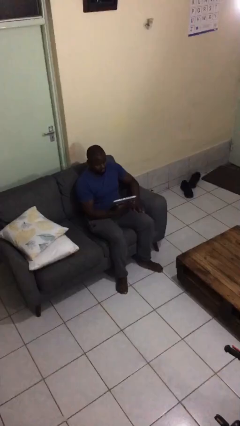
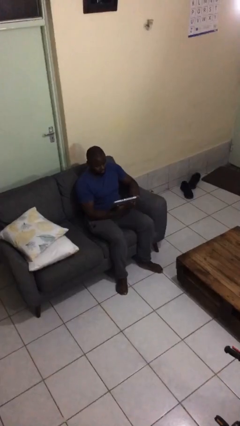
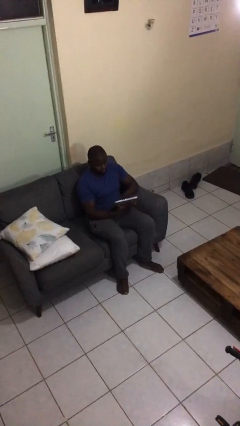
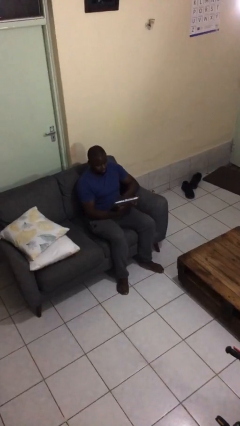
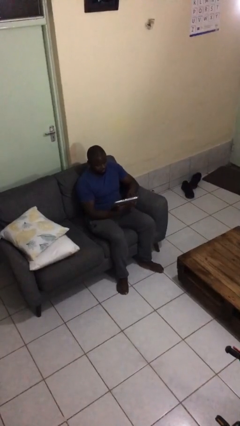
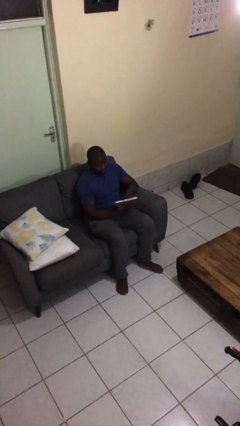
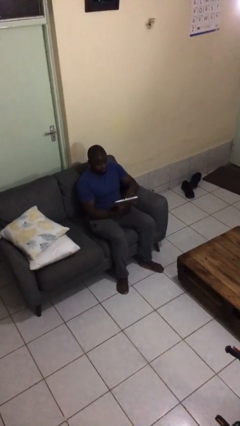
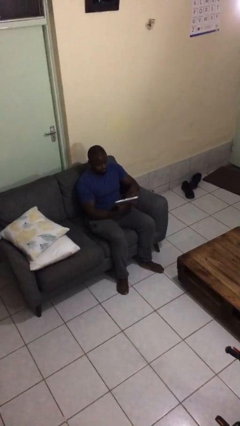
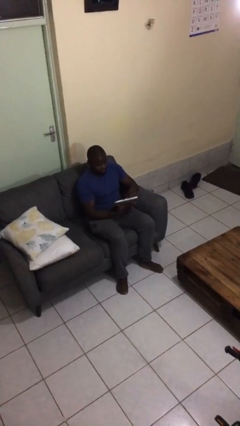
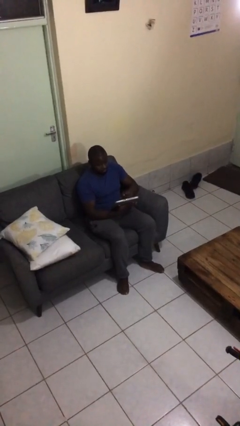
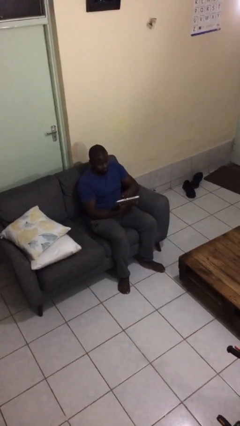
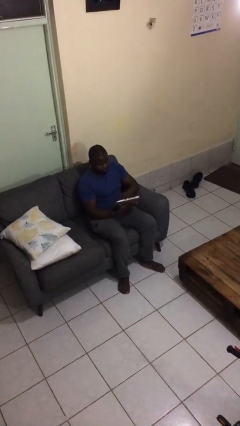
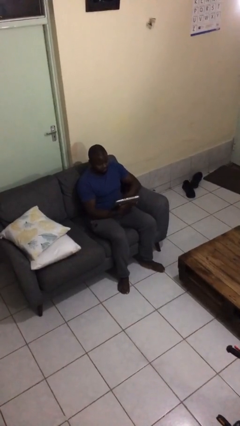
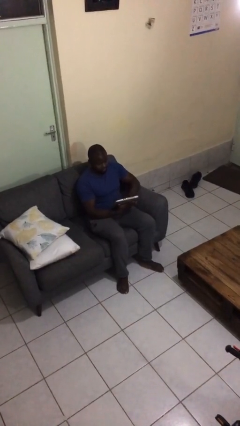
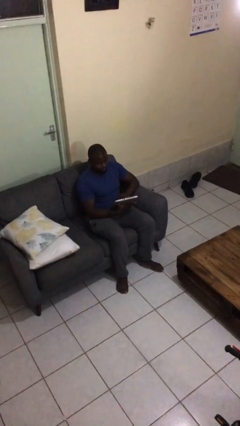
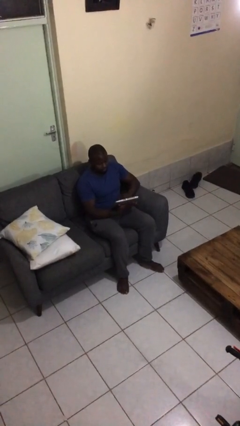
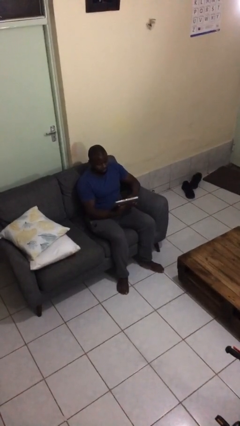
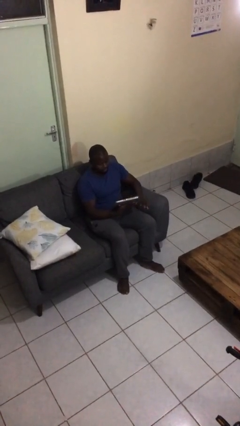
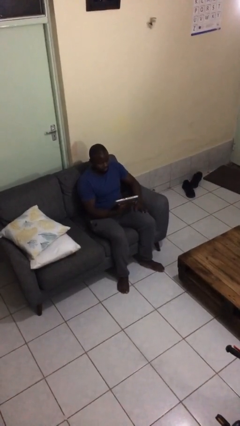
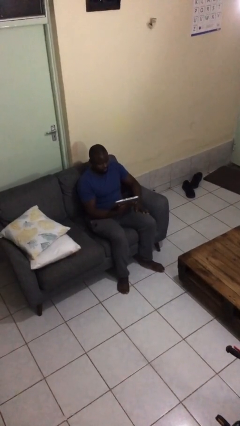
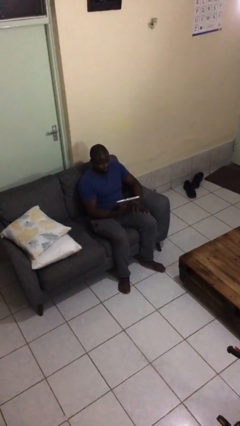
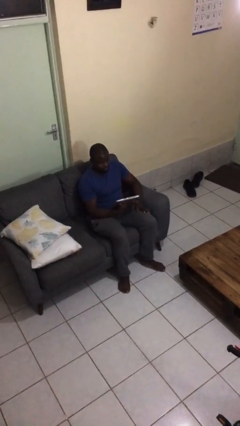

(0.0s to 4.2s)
person interacts with tablet

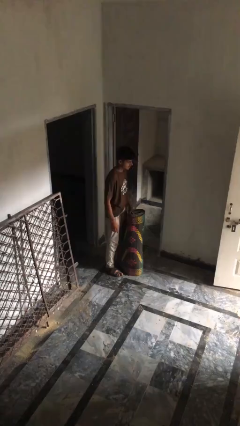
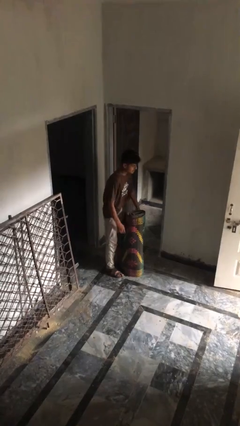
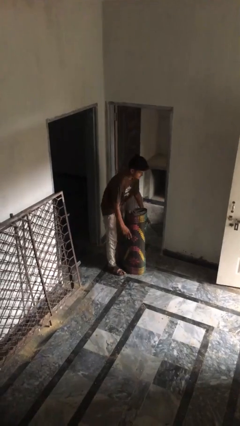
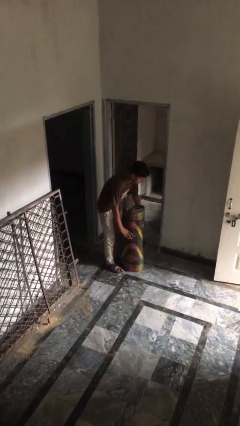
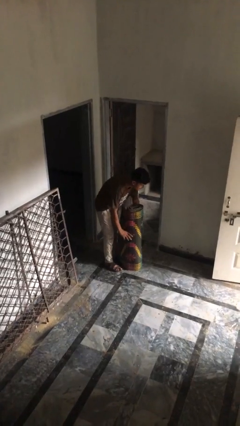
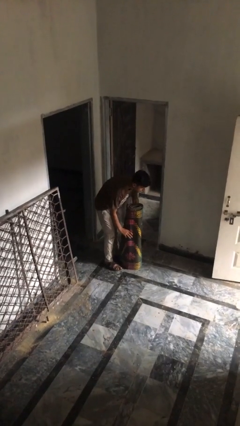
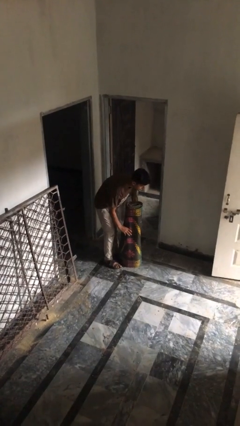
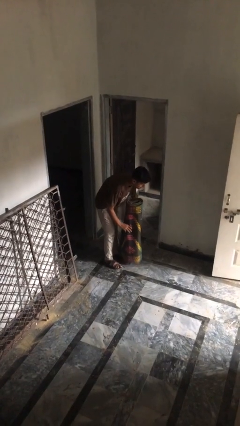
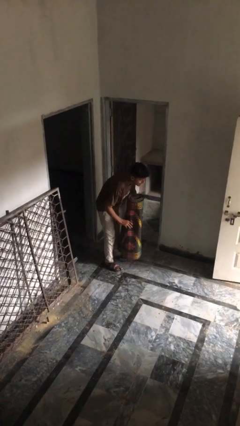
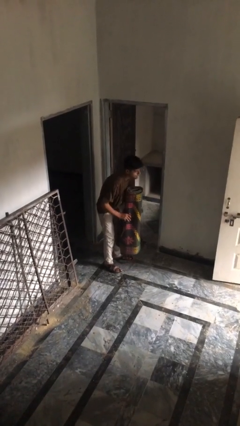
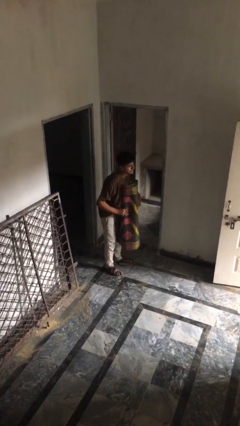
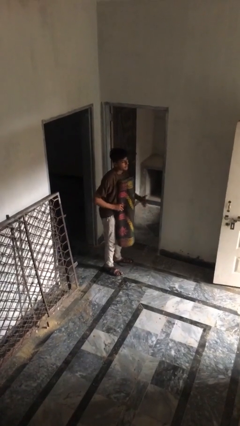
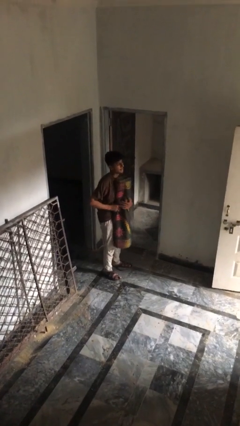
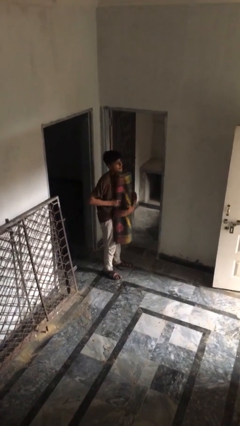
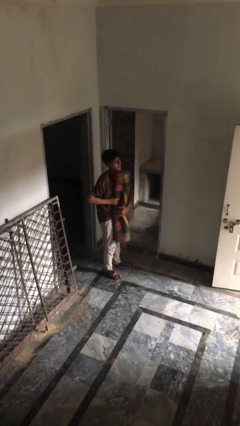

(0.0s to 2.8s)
person picks up object from floor

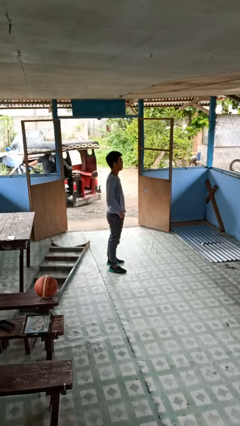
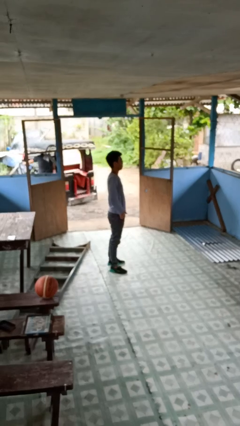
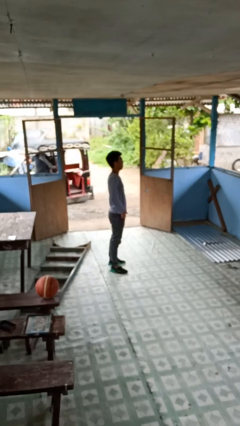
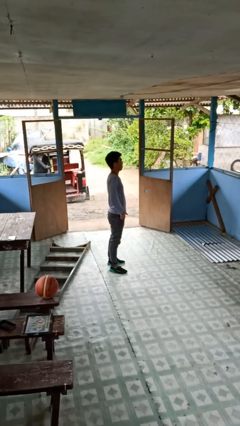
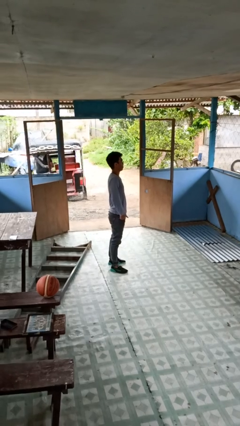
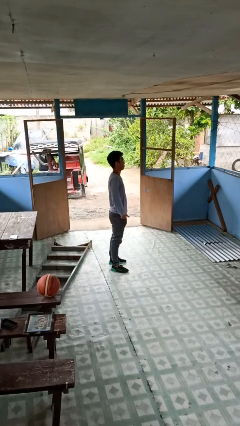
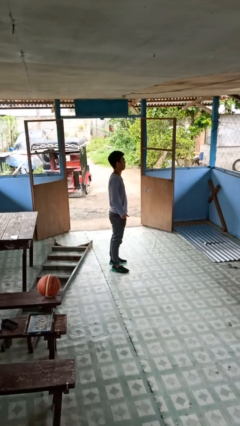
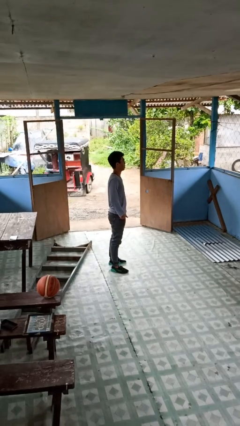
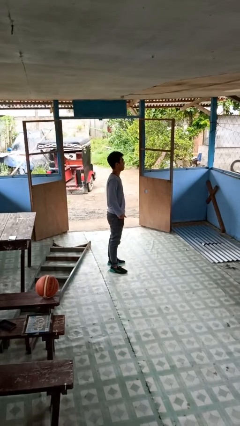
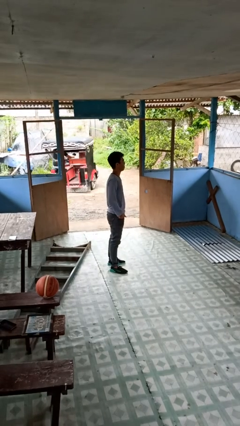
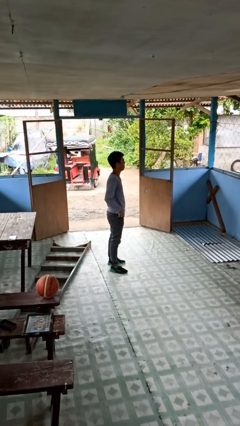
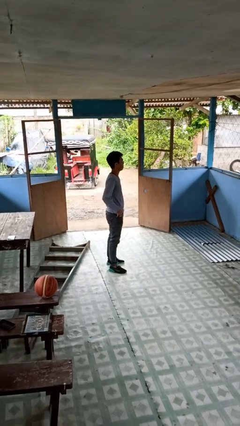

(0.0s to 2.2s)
person puts hands in back pockets

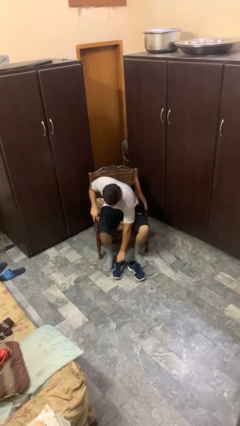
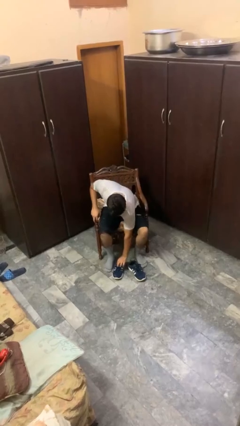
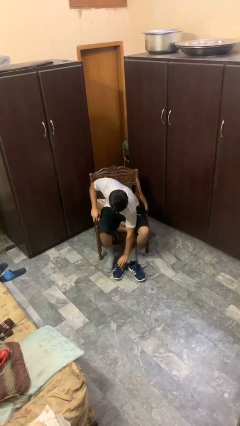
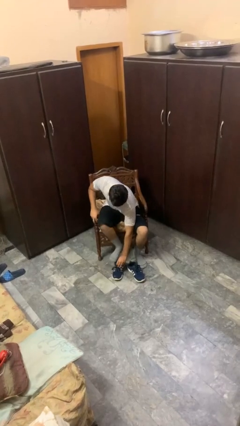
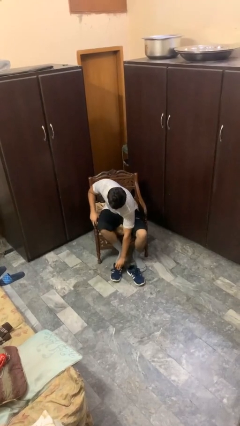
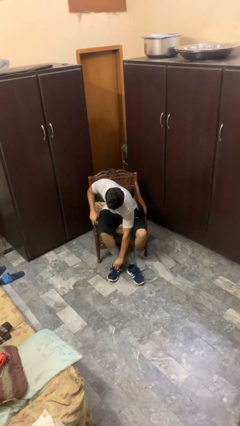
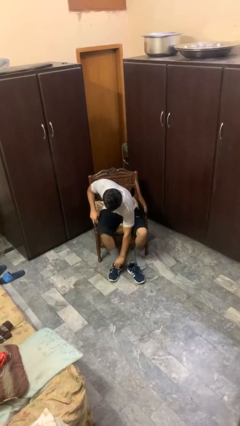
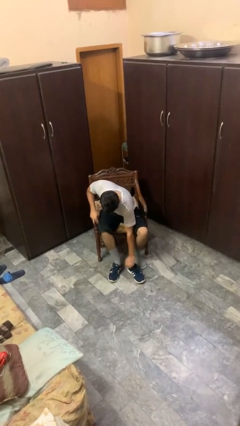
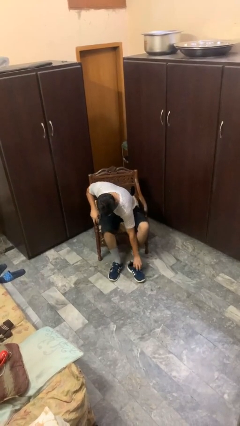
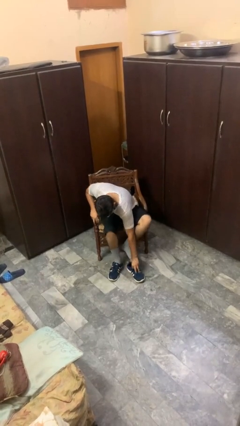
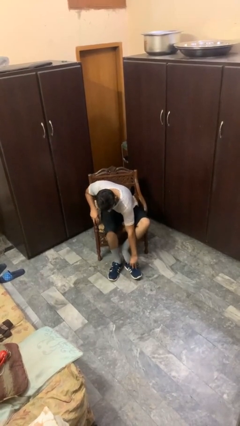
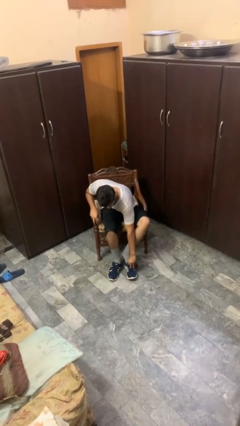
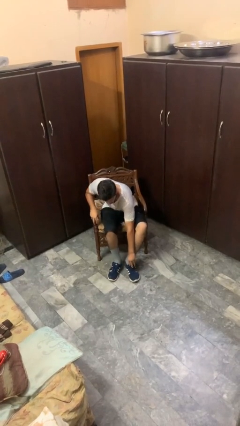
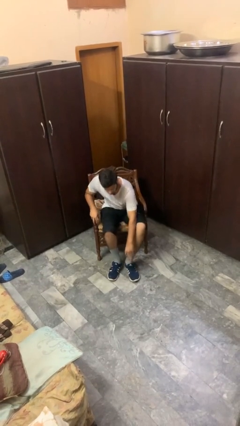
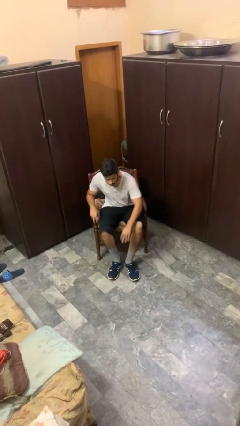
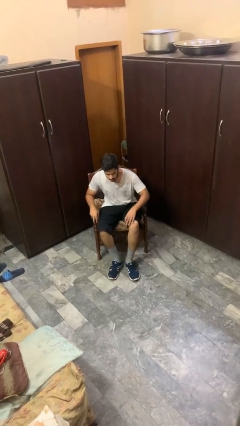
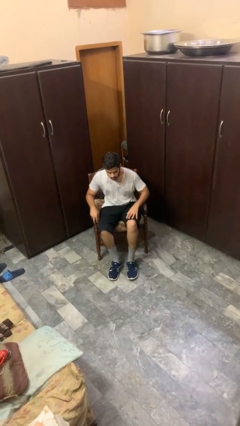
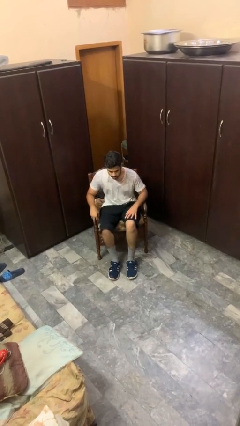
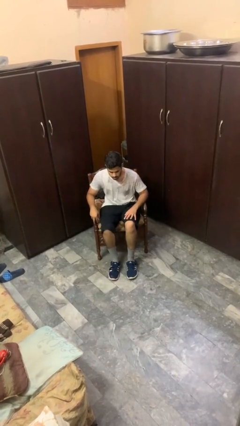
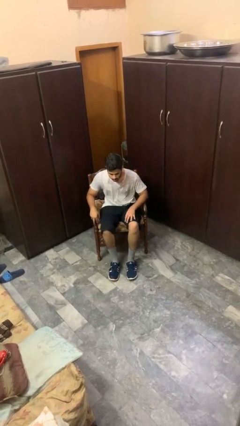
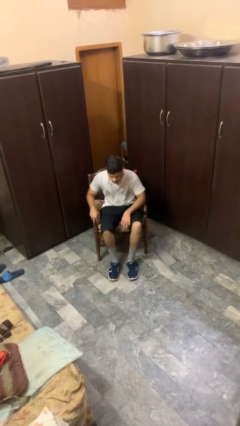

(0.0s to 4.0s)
person puts on shoes

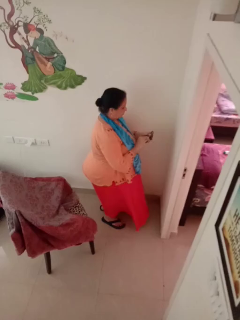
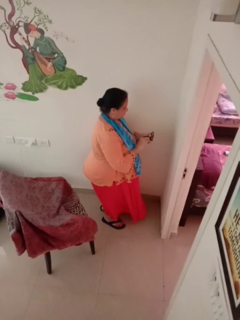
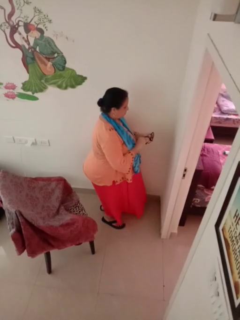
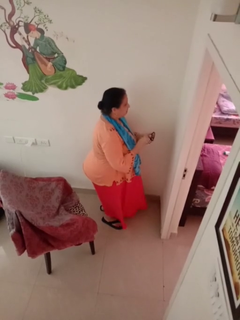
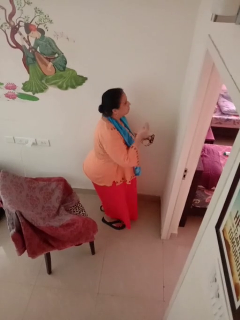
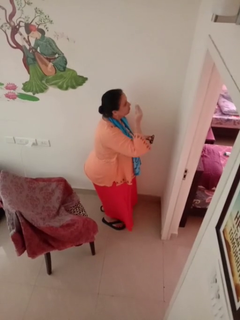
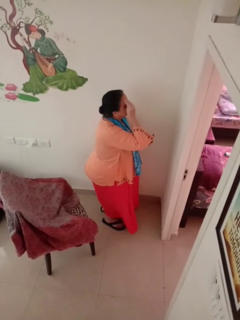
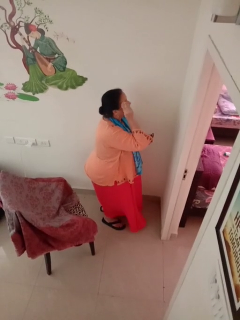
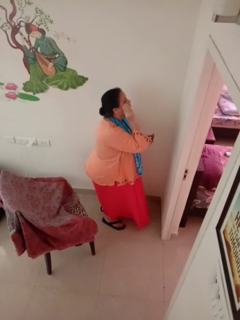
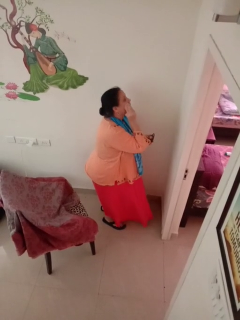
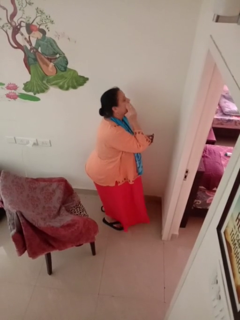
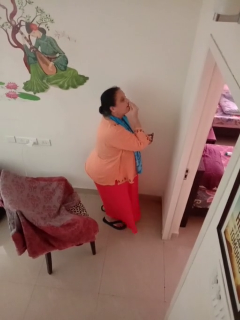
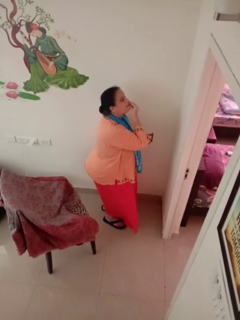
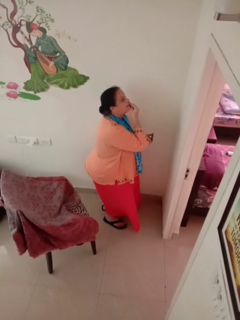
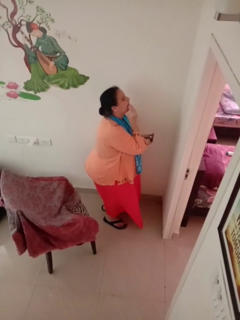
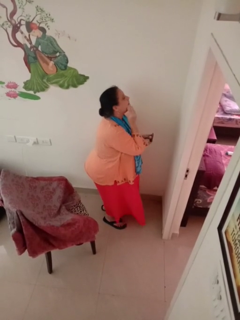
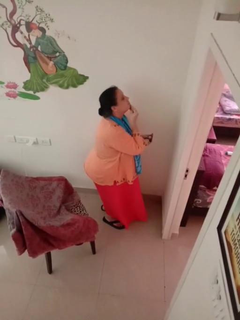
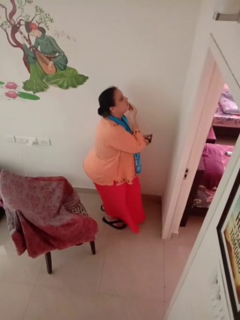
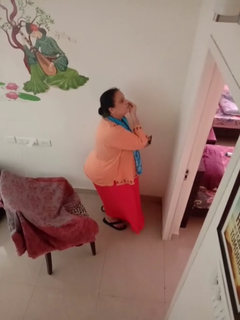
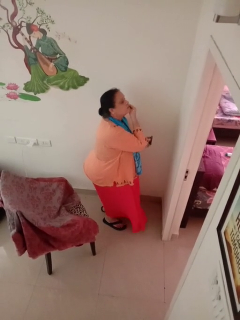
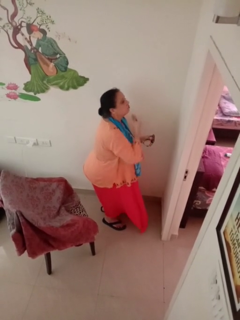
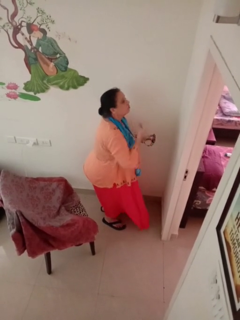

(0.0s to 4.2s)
person applies foundation makeup

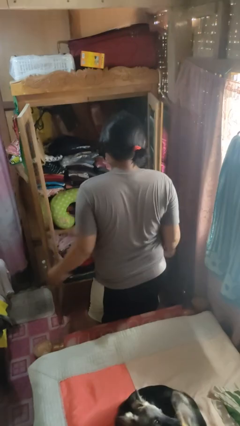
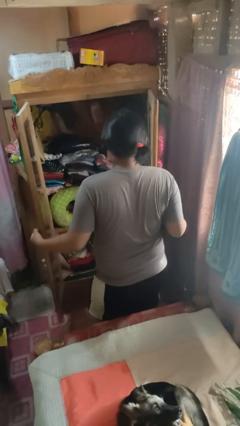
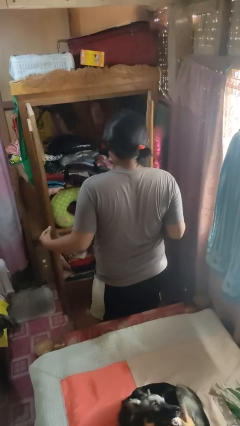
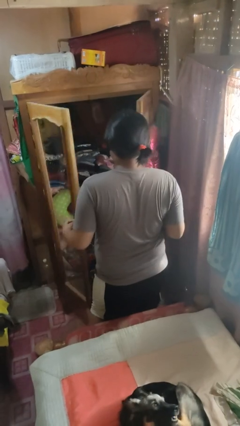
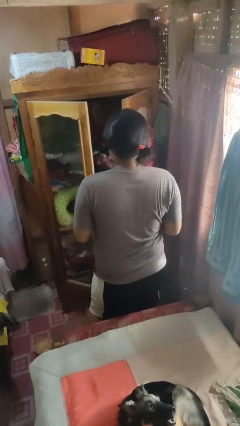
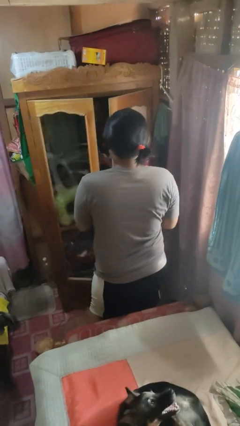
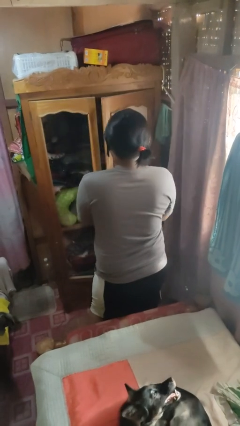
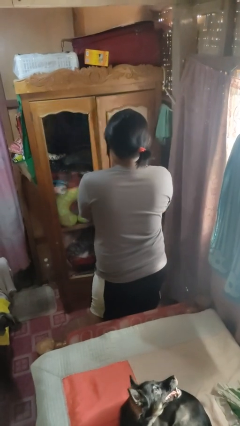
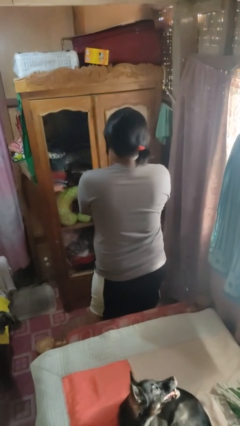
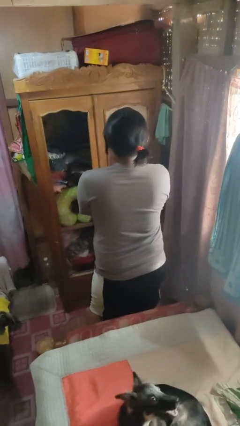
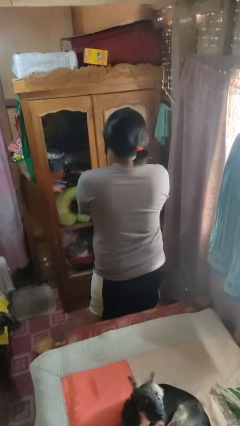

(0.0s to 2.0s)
person closes closet door
